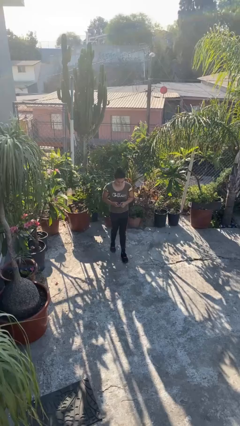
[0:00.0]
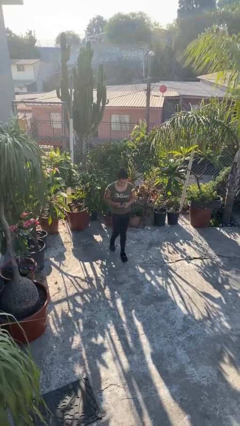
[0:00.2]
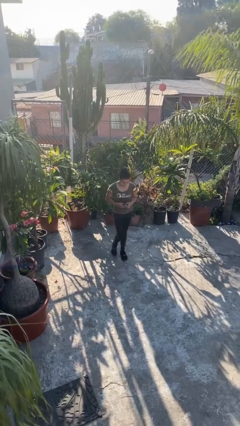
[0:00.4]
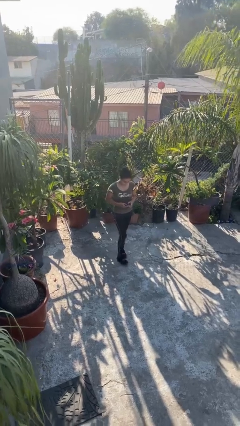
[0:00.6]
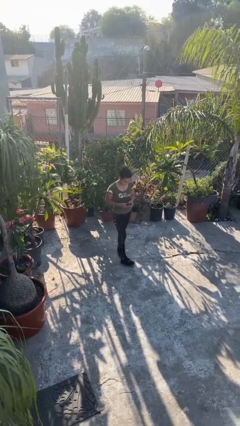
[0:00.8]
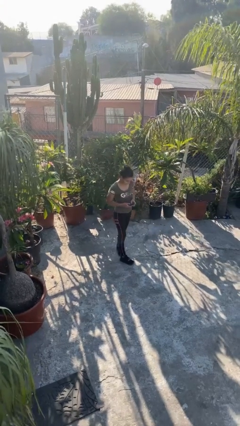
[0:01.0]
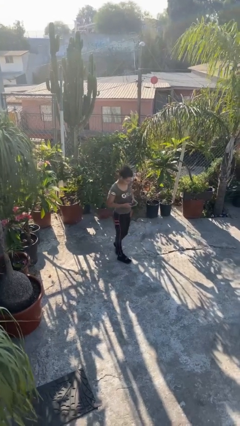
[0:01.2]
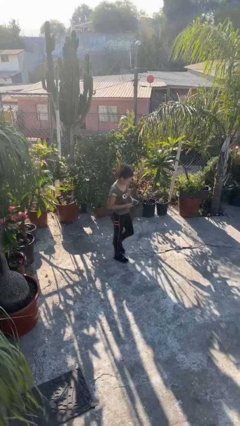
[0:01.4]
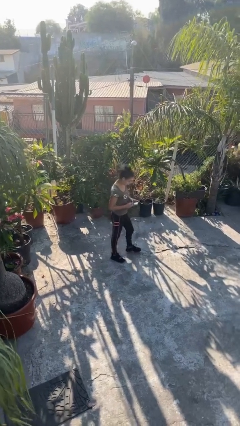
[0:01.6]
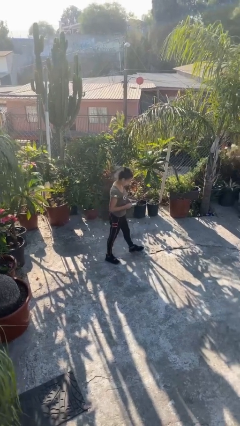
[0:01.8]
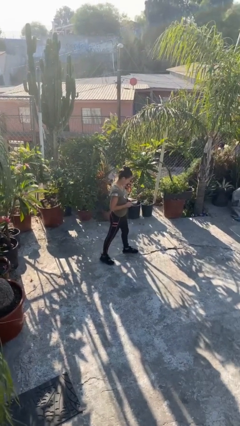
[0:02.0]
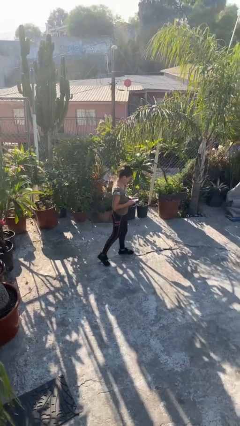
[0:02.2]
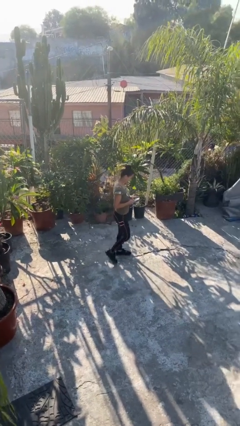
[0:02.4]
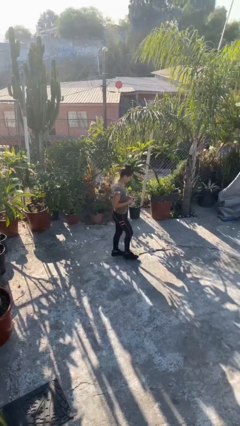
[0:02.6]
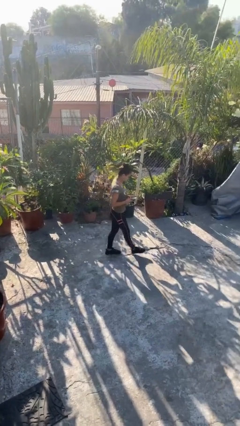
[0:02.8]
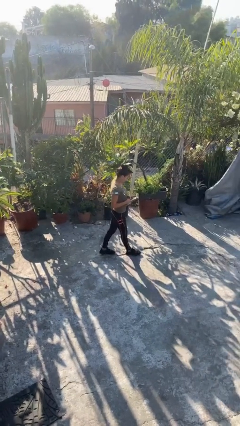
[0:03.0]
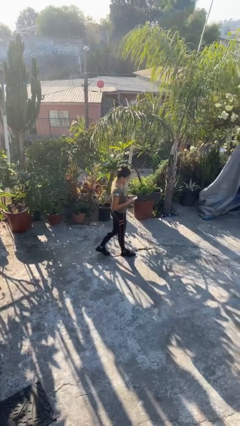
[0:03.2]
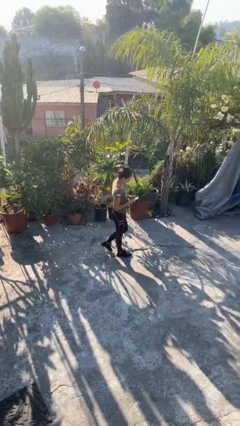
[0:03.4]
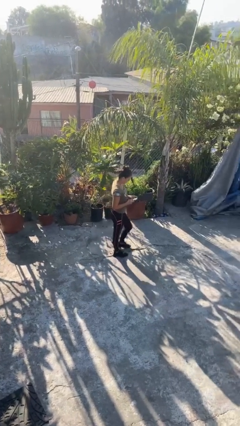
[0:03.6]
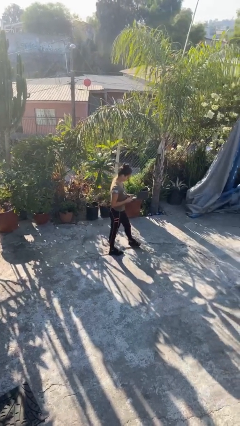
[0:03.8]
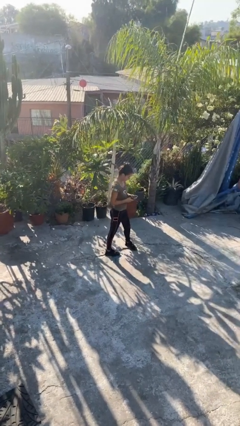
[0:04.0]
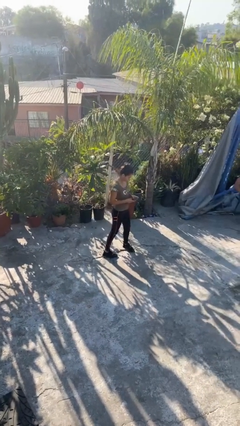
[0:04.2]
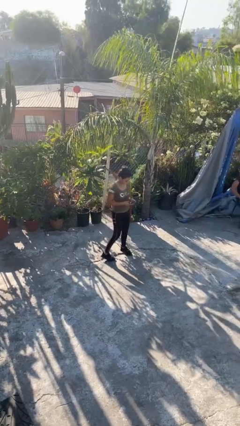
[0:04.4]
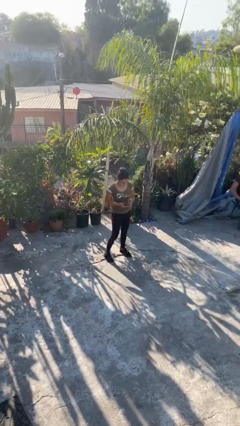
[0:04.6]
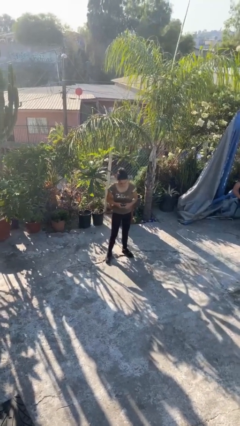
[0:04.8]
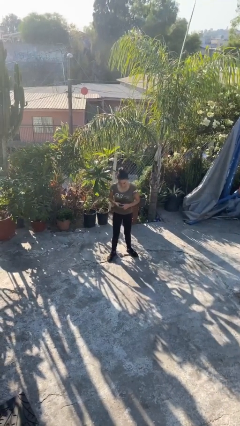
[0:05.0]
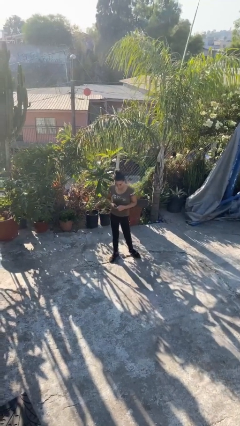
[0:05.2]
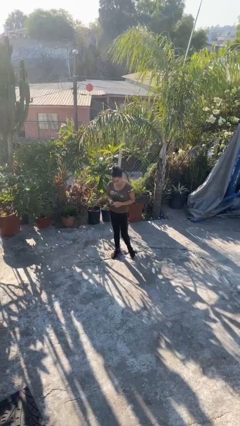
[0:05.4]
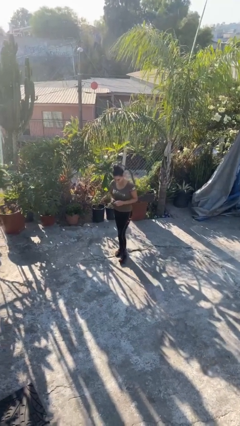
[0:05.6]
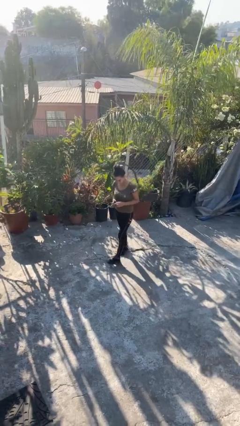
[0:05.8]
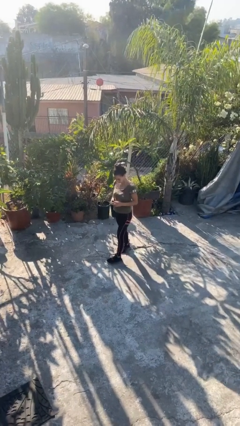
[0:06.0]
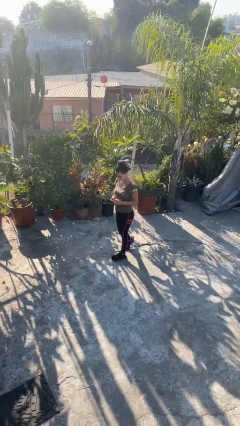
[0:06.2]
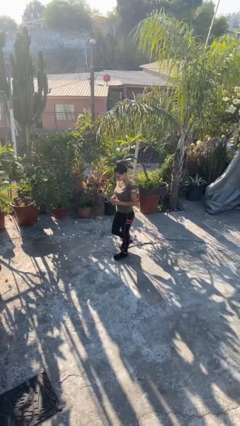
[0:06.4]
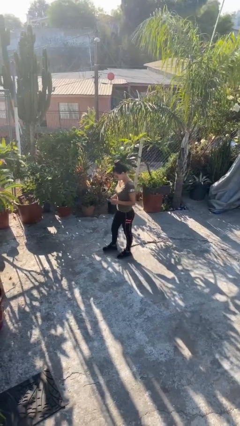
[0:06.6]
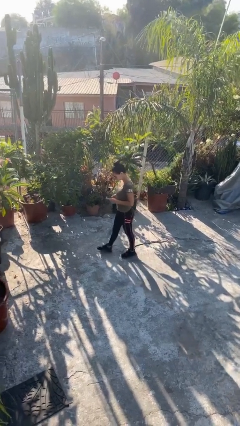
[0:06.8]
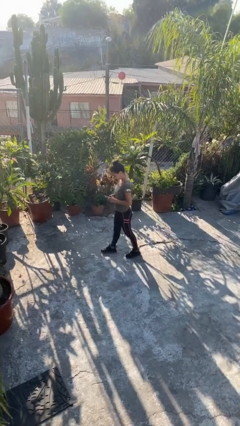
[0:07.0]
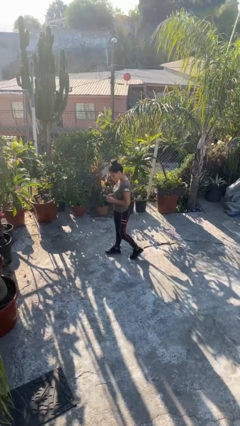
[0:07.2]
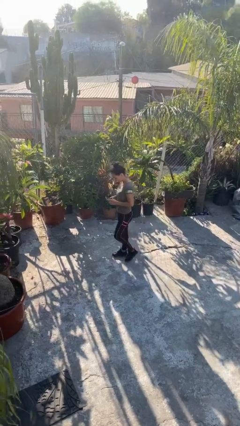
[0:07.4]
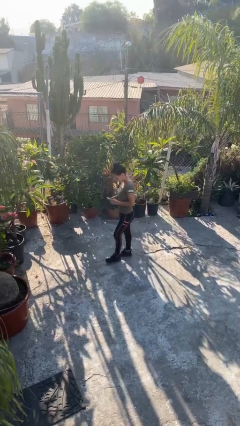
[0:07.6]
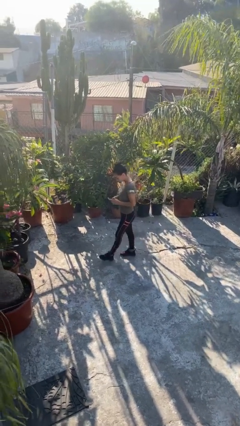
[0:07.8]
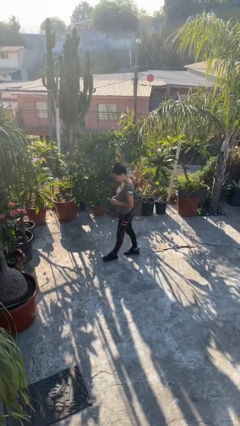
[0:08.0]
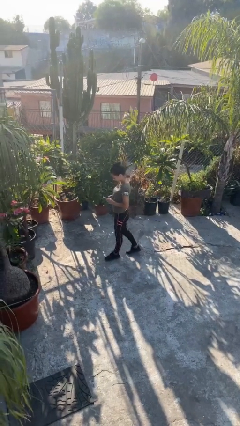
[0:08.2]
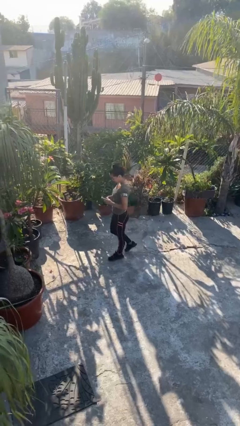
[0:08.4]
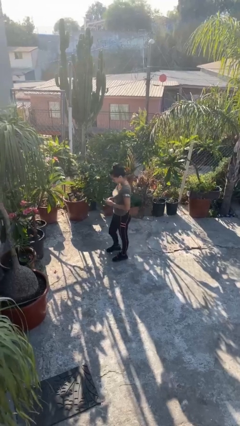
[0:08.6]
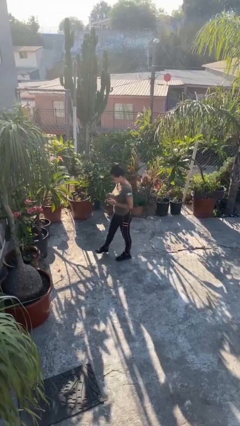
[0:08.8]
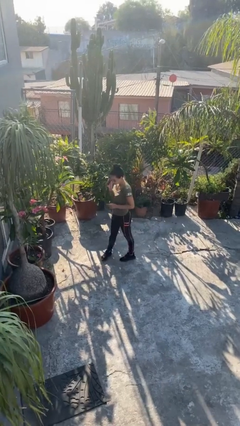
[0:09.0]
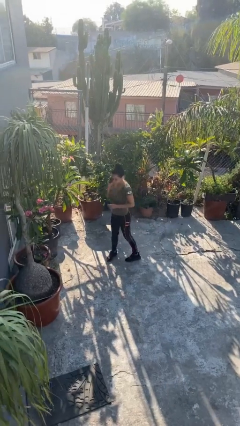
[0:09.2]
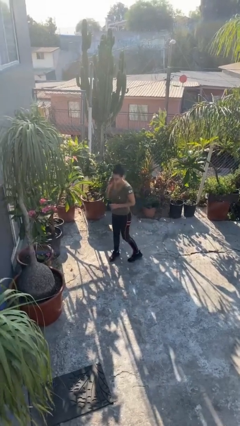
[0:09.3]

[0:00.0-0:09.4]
person texts on phone

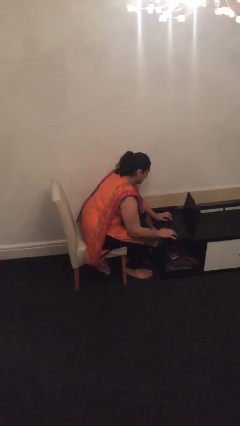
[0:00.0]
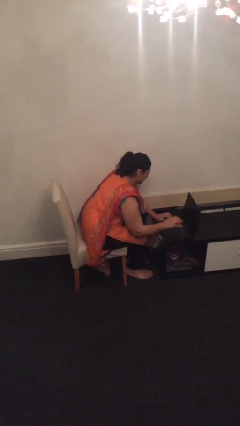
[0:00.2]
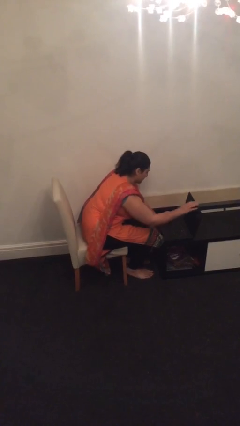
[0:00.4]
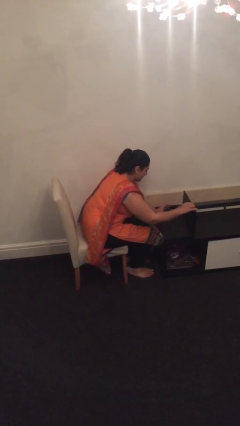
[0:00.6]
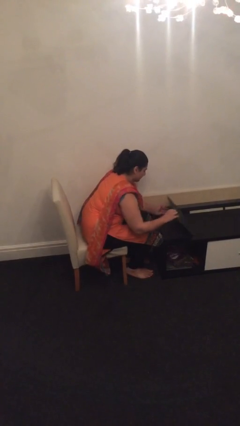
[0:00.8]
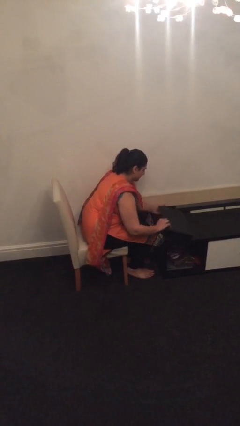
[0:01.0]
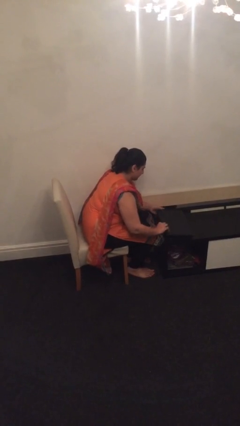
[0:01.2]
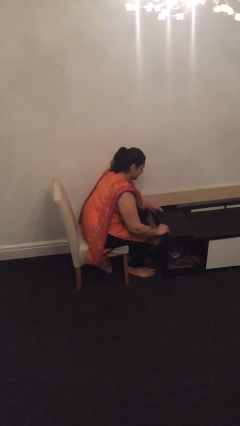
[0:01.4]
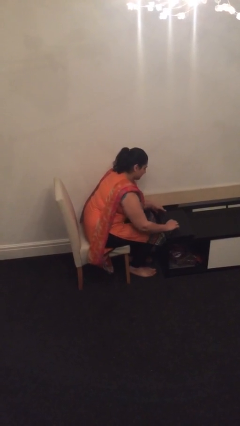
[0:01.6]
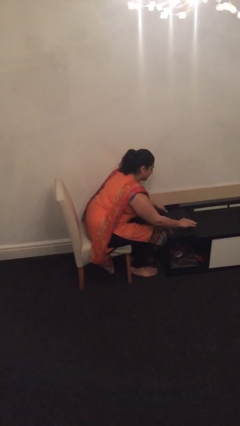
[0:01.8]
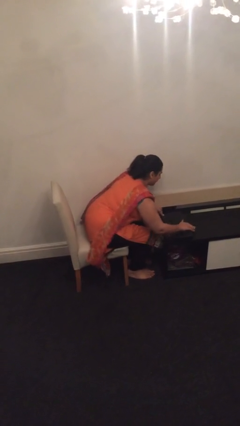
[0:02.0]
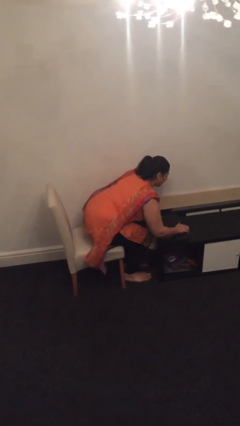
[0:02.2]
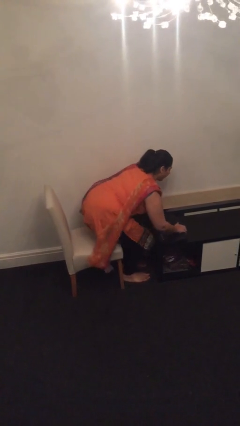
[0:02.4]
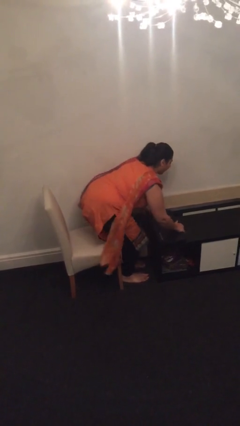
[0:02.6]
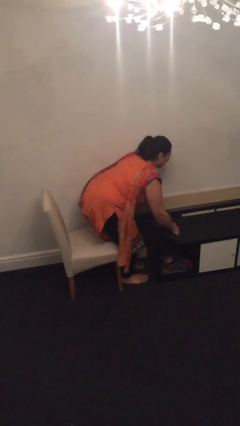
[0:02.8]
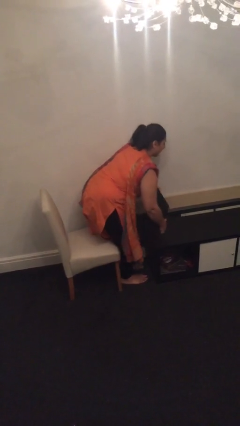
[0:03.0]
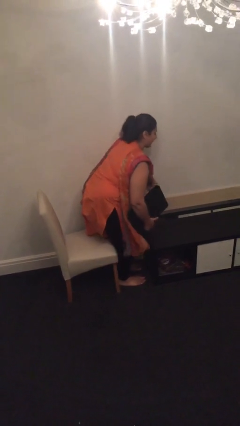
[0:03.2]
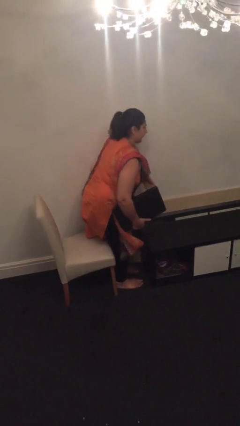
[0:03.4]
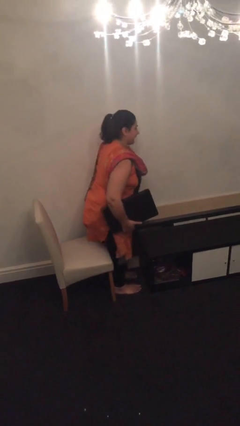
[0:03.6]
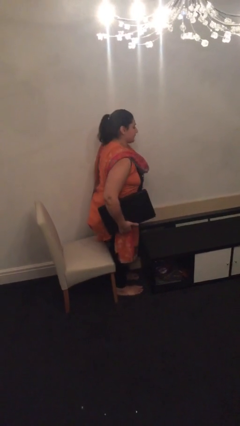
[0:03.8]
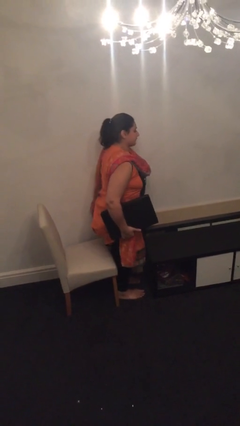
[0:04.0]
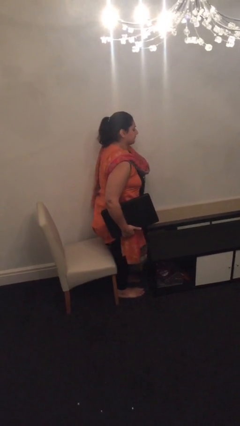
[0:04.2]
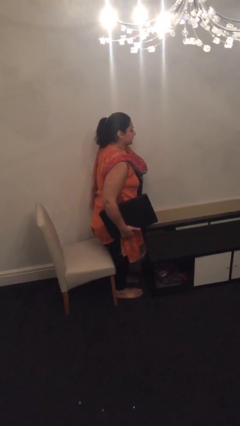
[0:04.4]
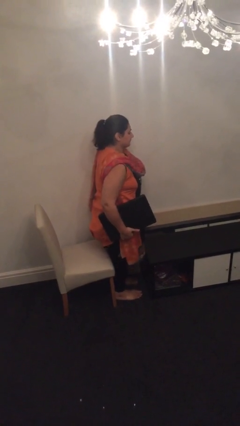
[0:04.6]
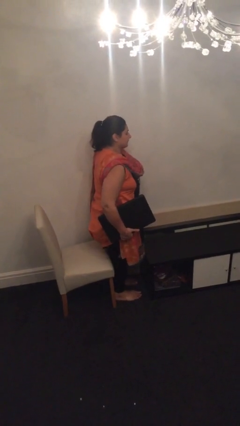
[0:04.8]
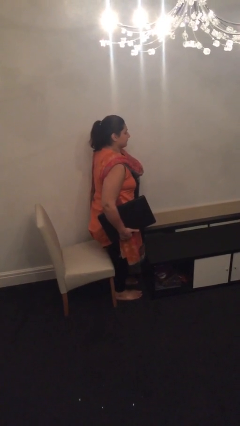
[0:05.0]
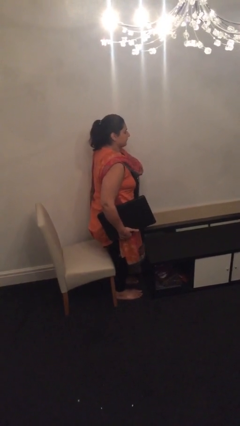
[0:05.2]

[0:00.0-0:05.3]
person stands up

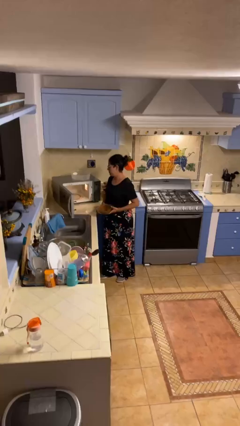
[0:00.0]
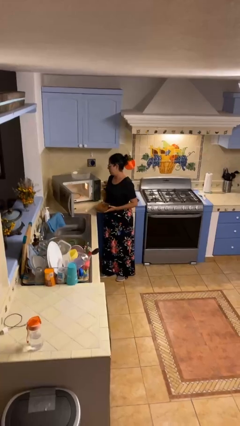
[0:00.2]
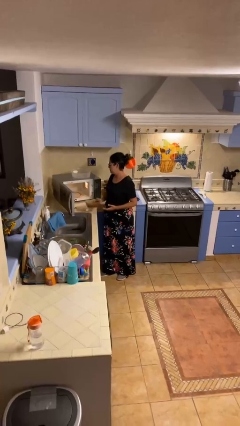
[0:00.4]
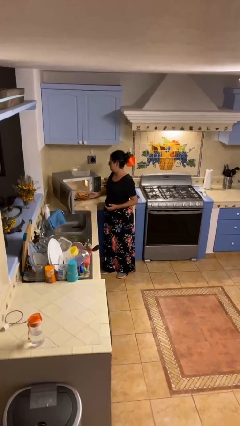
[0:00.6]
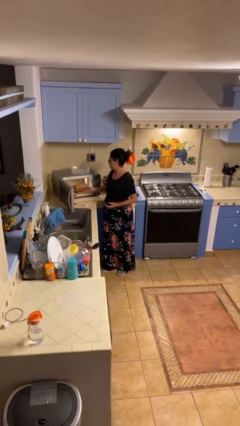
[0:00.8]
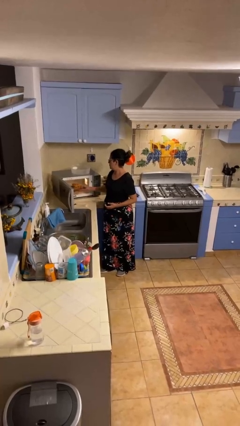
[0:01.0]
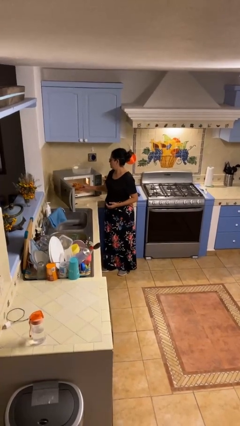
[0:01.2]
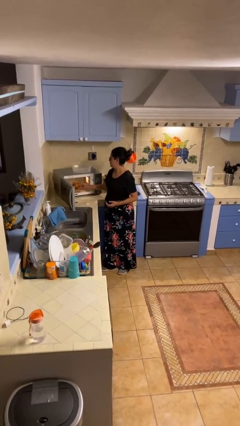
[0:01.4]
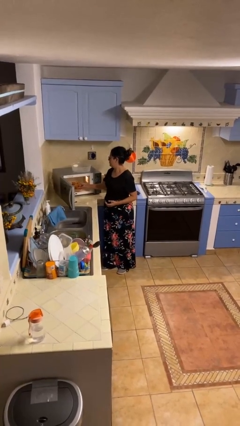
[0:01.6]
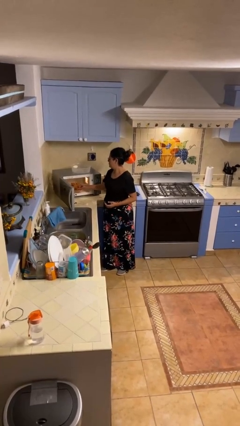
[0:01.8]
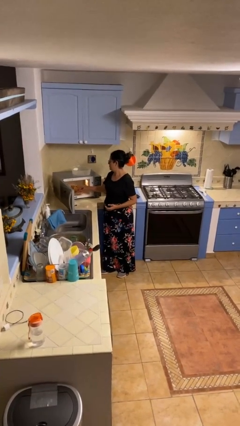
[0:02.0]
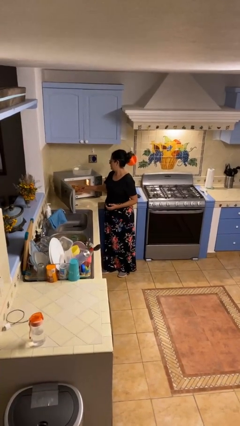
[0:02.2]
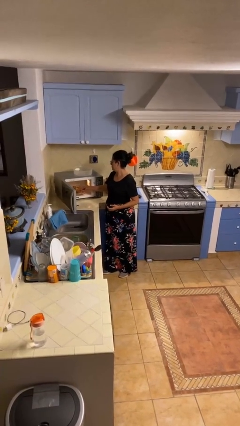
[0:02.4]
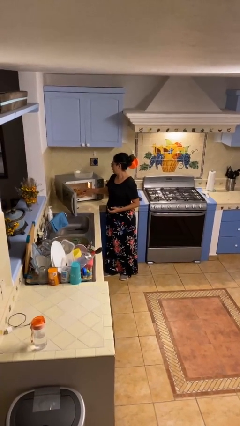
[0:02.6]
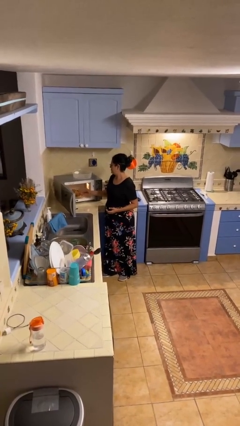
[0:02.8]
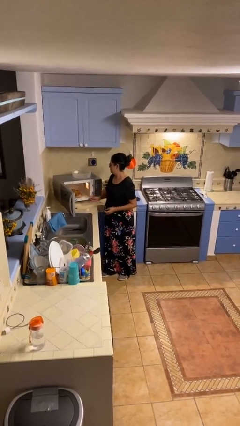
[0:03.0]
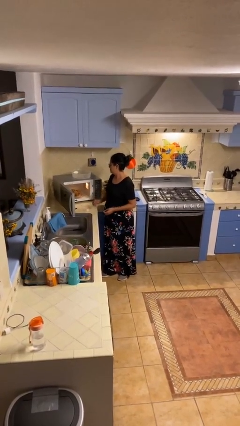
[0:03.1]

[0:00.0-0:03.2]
person puts object into microwave
